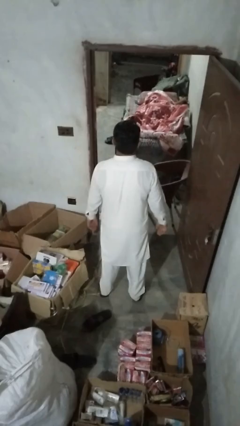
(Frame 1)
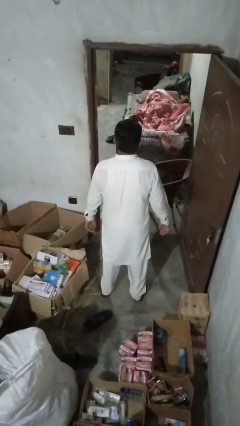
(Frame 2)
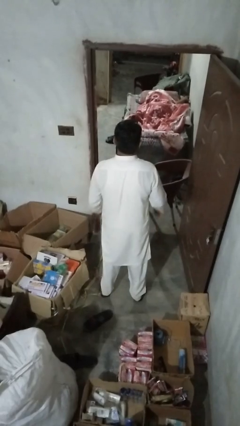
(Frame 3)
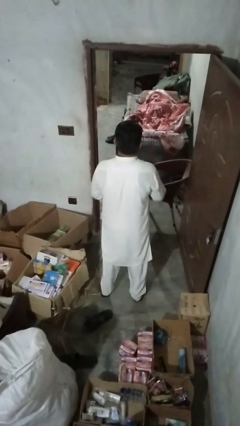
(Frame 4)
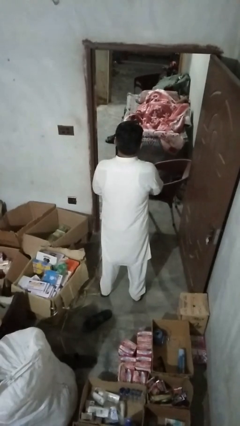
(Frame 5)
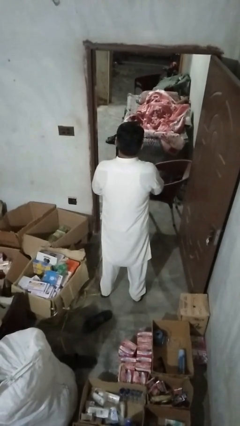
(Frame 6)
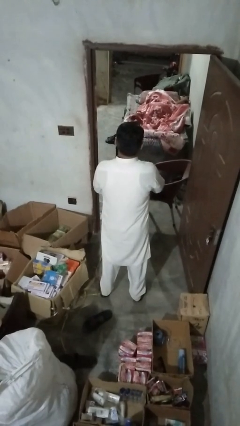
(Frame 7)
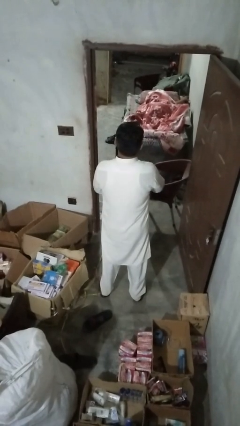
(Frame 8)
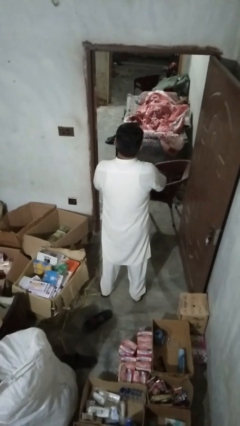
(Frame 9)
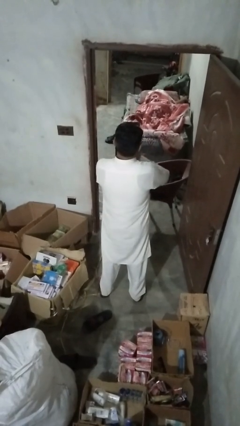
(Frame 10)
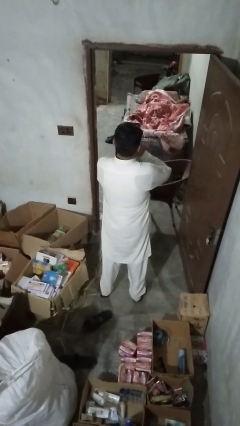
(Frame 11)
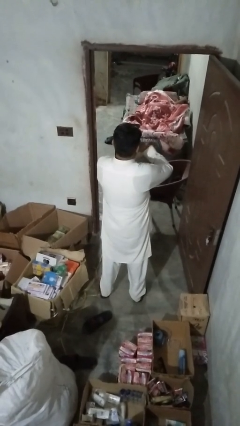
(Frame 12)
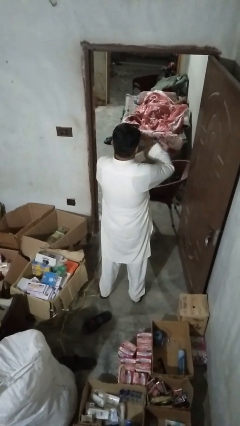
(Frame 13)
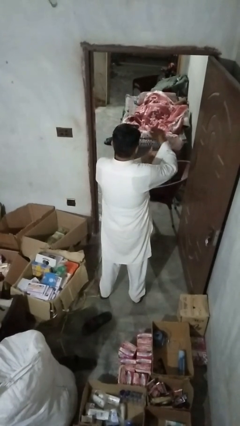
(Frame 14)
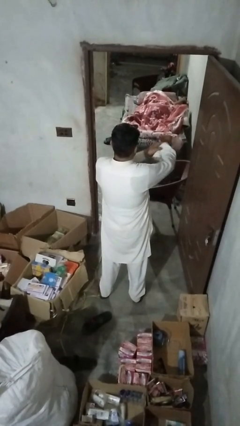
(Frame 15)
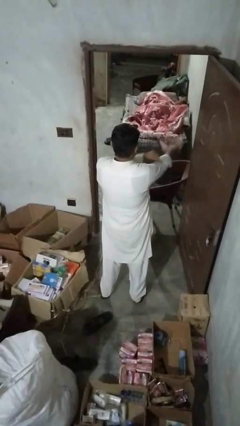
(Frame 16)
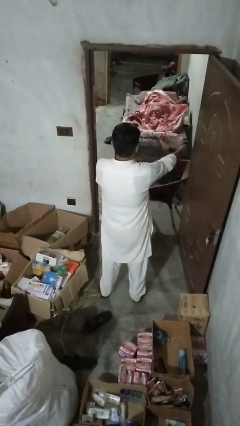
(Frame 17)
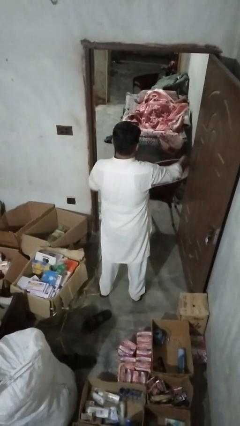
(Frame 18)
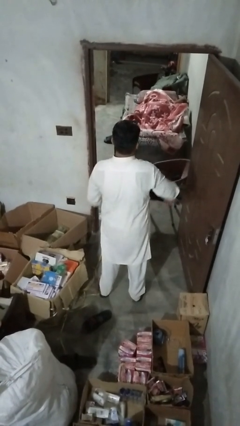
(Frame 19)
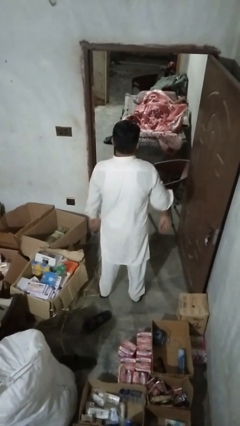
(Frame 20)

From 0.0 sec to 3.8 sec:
person unbuttons shirt

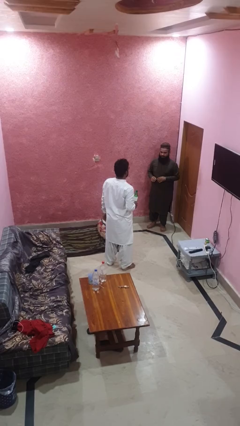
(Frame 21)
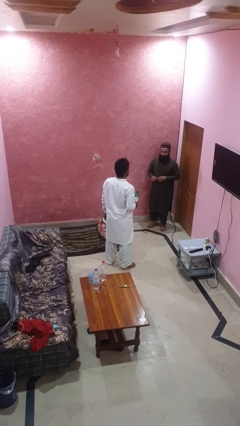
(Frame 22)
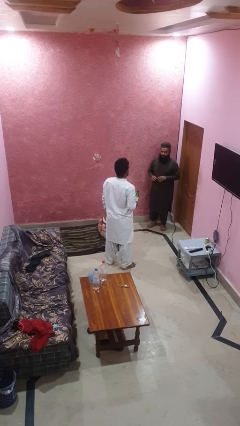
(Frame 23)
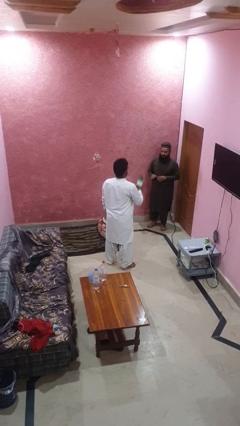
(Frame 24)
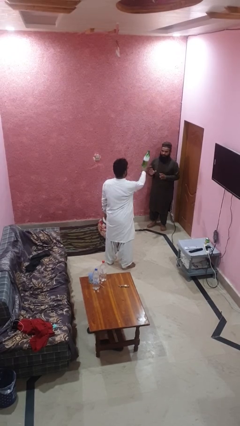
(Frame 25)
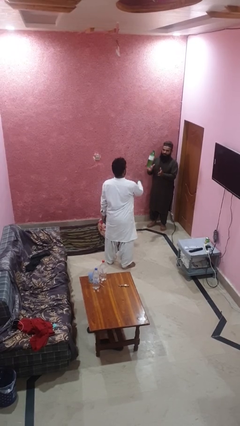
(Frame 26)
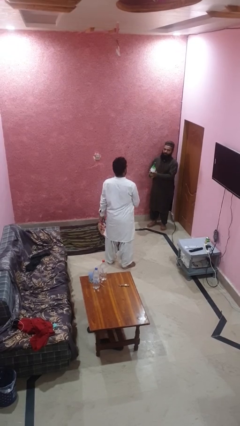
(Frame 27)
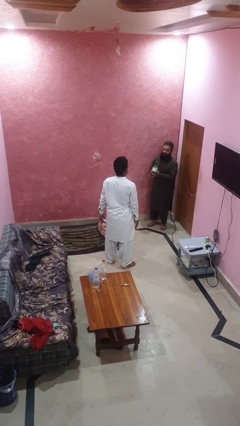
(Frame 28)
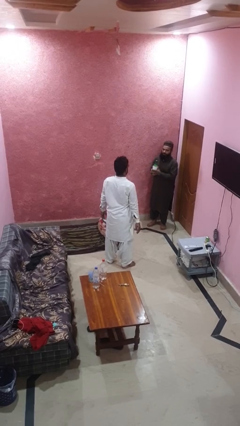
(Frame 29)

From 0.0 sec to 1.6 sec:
person throws object to person

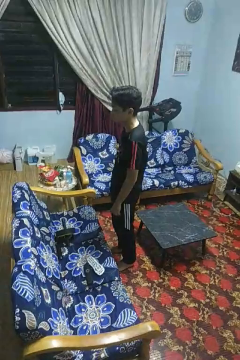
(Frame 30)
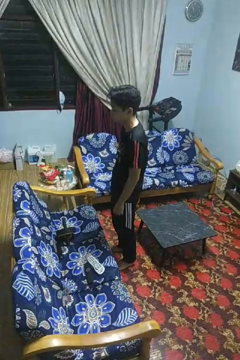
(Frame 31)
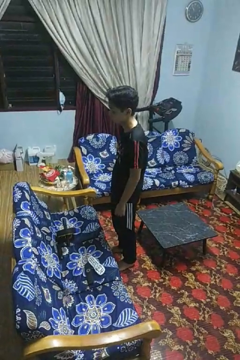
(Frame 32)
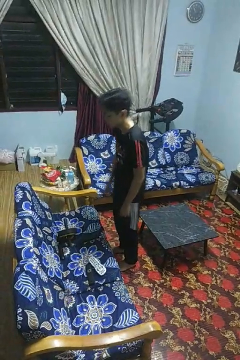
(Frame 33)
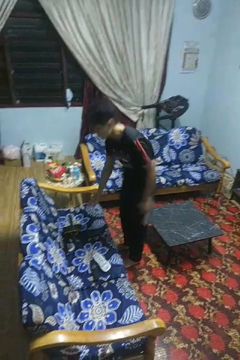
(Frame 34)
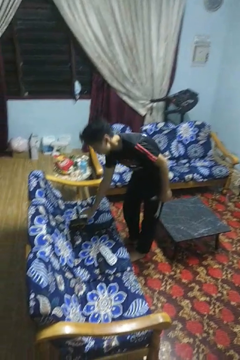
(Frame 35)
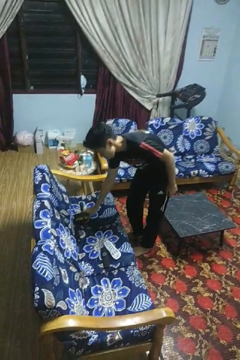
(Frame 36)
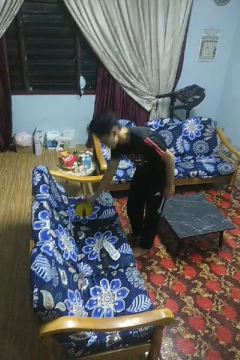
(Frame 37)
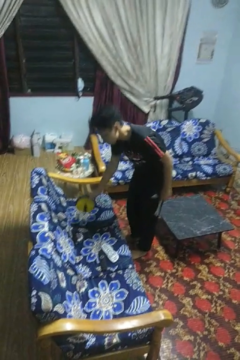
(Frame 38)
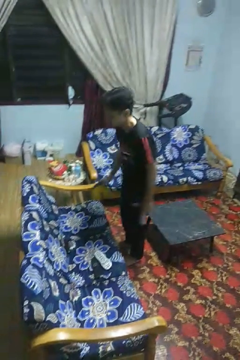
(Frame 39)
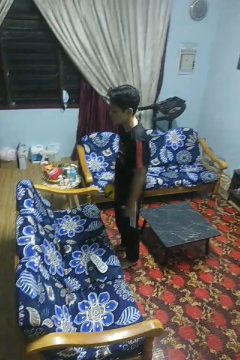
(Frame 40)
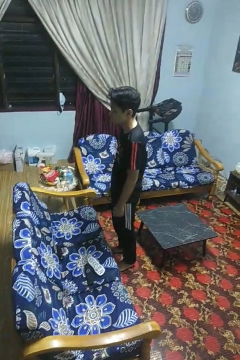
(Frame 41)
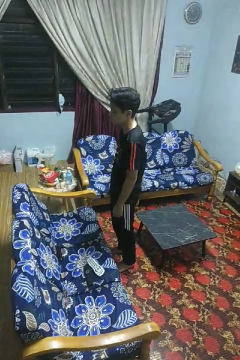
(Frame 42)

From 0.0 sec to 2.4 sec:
person picks up object from couch

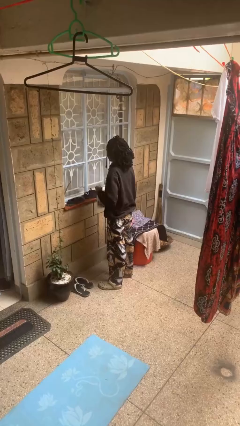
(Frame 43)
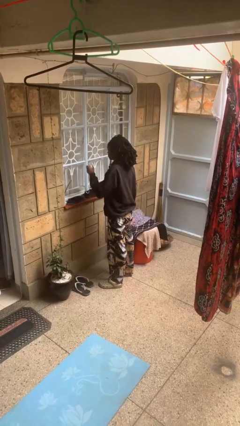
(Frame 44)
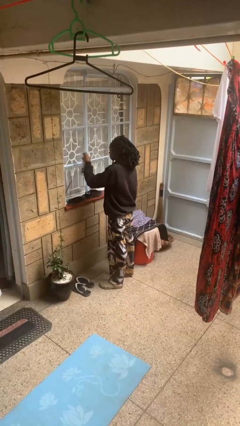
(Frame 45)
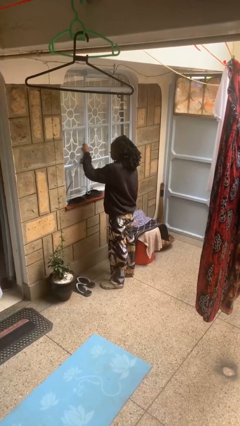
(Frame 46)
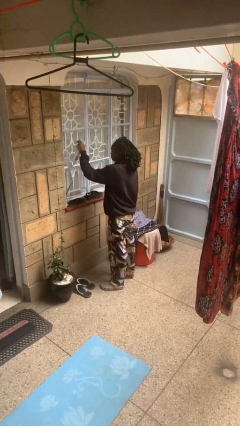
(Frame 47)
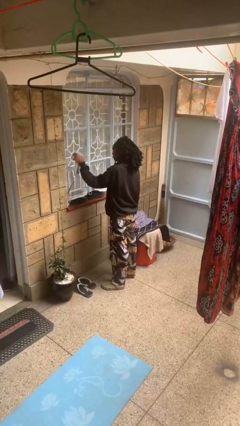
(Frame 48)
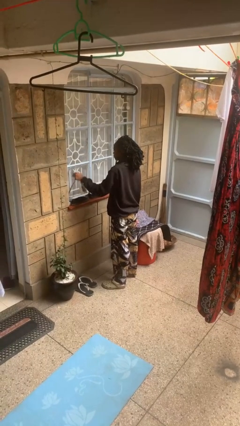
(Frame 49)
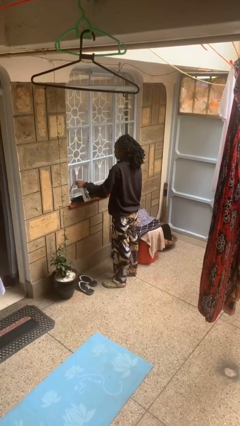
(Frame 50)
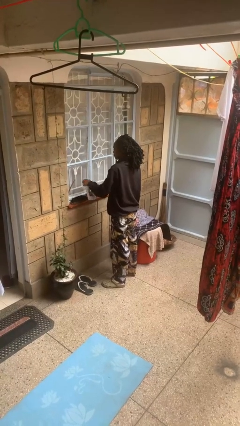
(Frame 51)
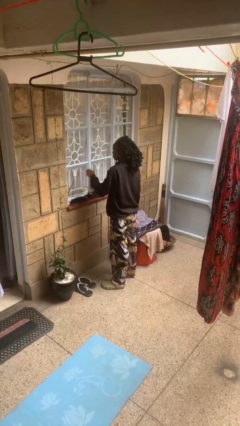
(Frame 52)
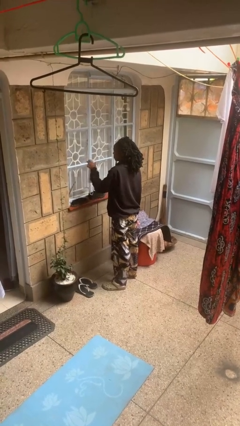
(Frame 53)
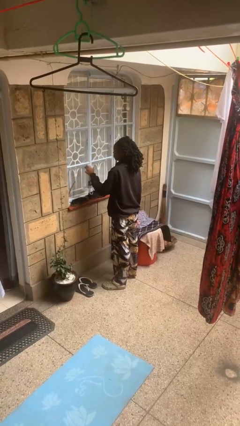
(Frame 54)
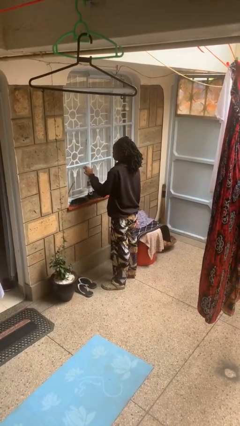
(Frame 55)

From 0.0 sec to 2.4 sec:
person sprays from bottle

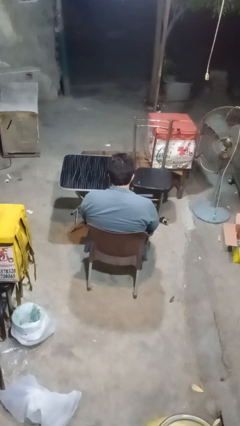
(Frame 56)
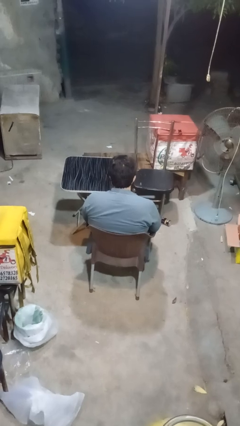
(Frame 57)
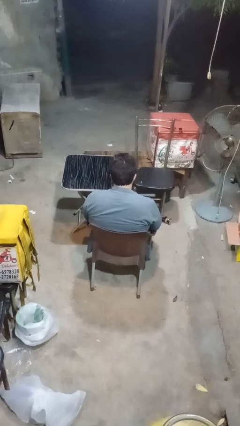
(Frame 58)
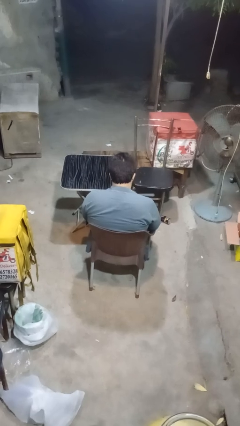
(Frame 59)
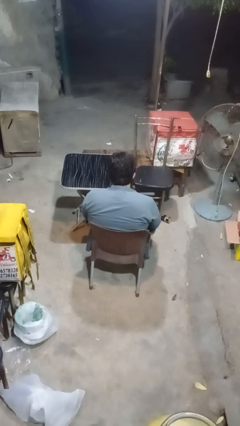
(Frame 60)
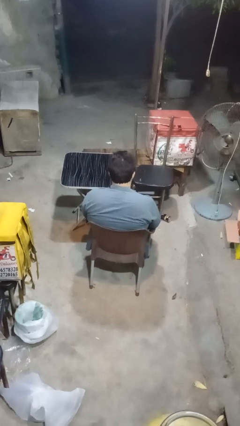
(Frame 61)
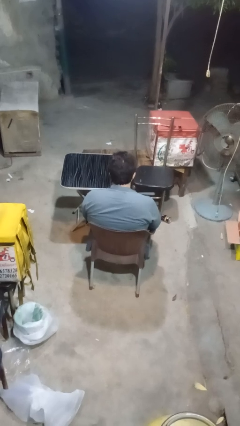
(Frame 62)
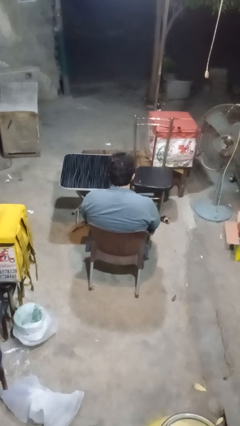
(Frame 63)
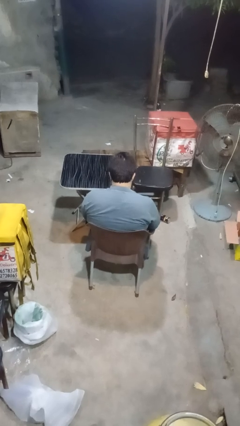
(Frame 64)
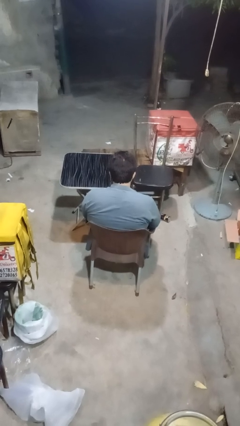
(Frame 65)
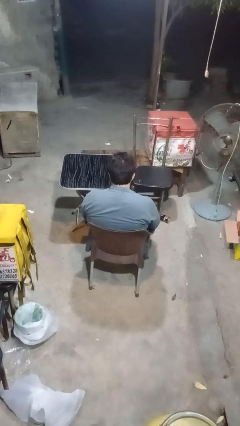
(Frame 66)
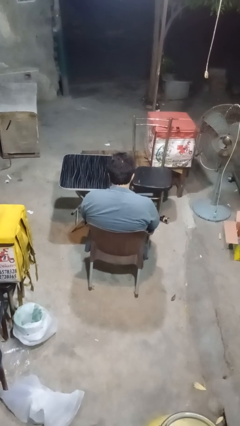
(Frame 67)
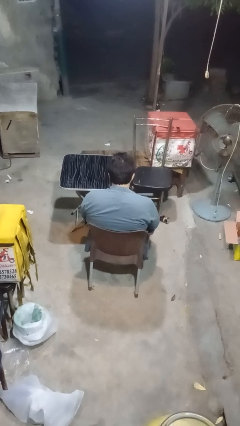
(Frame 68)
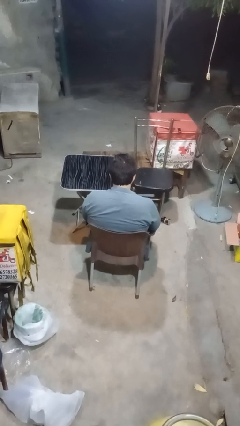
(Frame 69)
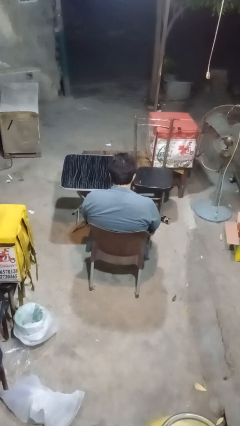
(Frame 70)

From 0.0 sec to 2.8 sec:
person nods head

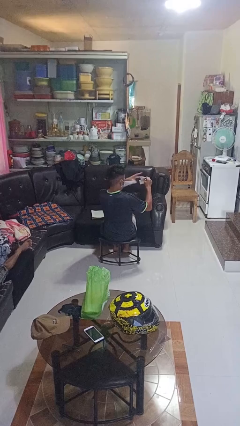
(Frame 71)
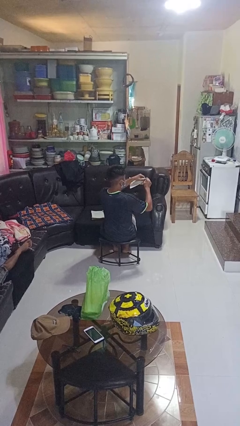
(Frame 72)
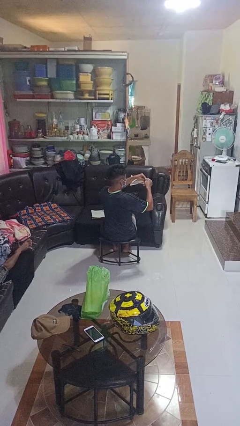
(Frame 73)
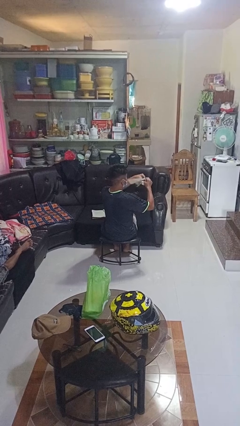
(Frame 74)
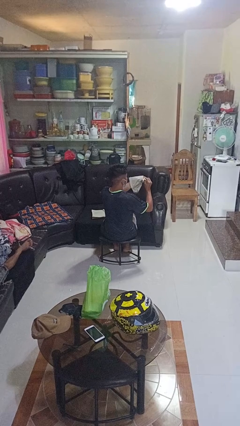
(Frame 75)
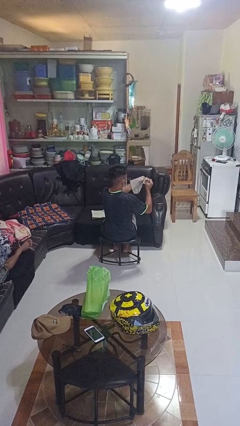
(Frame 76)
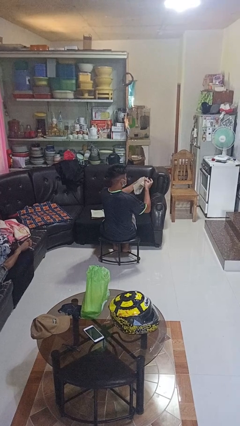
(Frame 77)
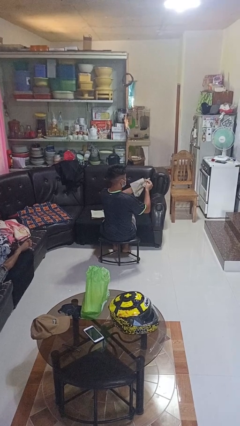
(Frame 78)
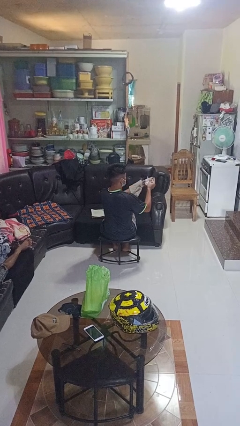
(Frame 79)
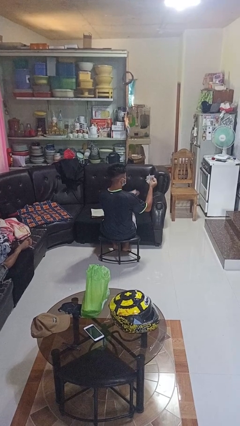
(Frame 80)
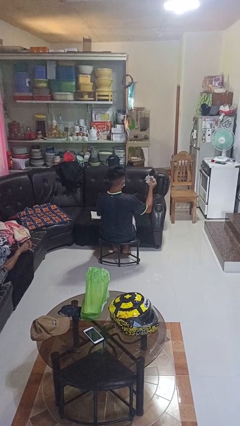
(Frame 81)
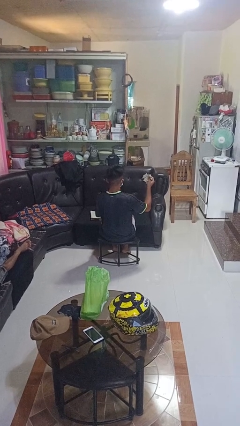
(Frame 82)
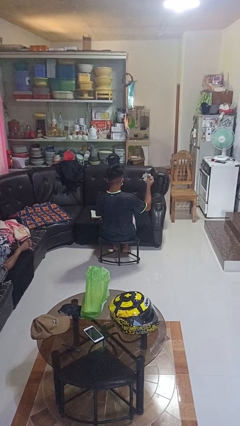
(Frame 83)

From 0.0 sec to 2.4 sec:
person tears paper

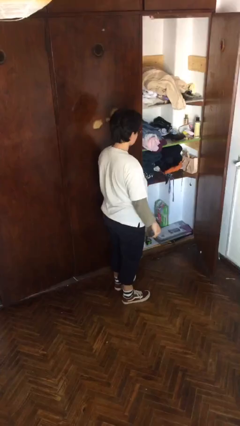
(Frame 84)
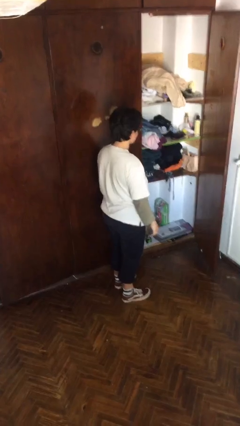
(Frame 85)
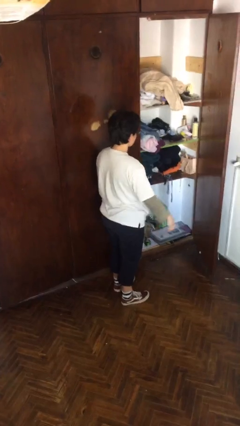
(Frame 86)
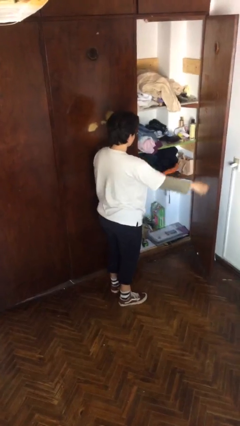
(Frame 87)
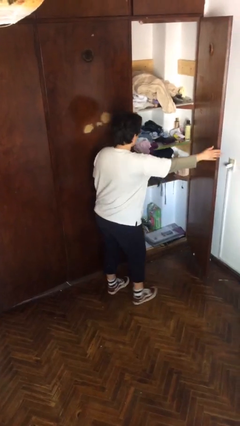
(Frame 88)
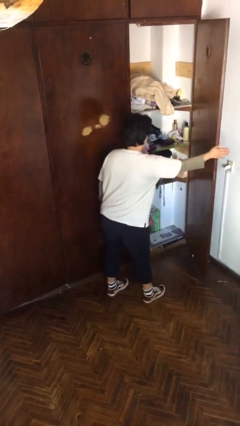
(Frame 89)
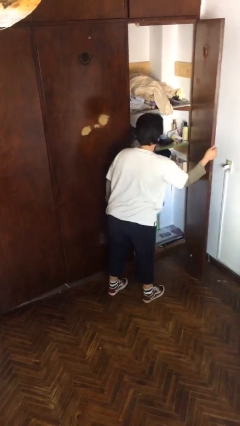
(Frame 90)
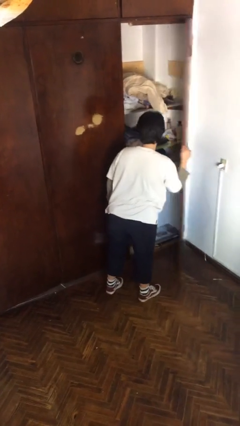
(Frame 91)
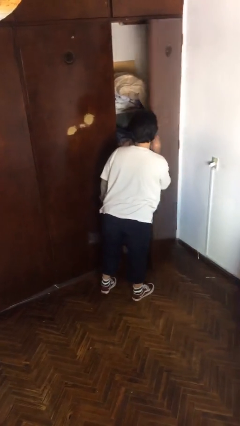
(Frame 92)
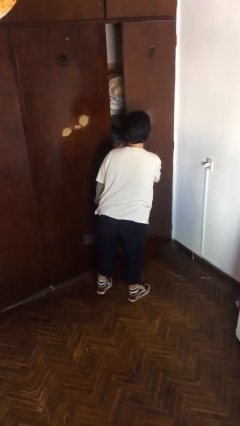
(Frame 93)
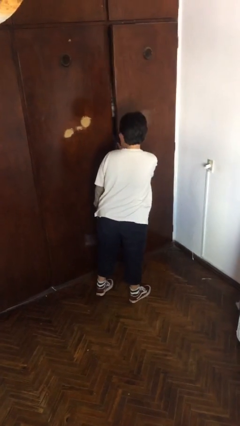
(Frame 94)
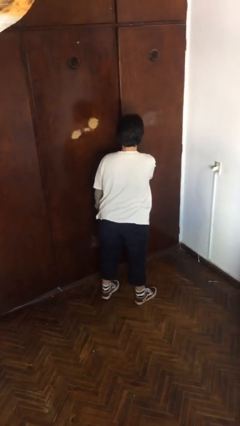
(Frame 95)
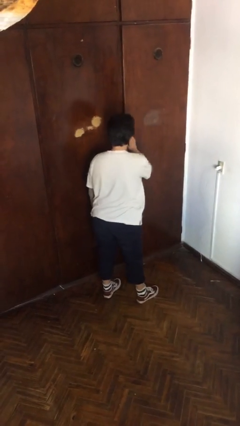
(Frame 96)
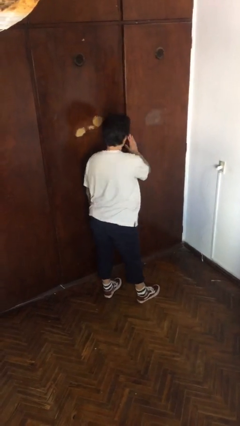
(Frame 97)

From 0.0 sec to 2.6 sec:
person closes closet door
